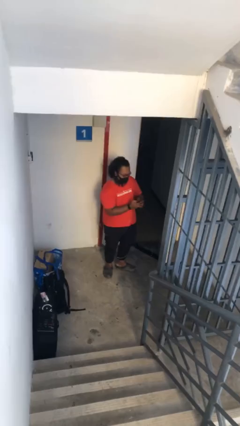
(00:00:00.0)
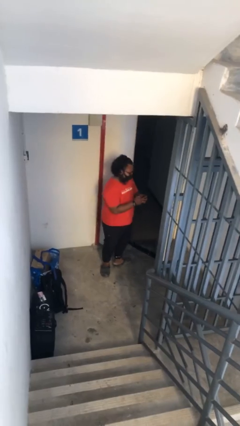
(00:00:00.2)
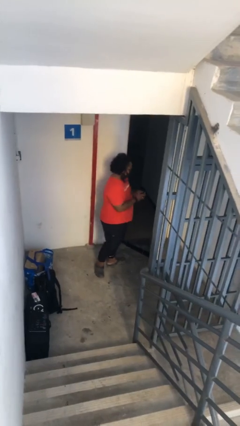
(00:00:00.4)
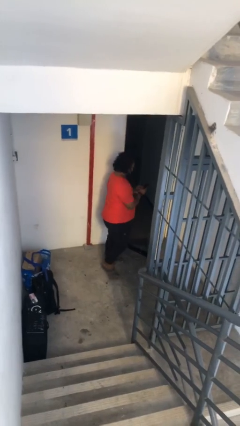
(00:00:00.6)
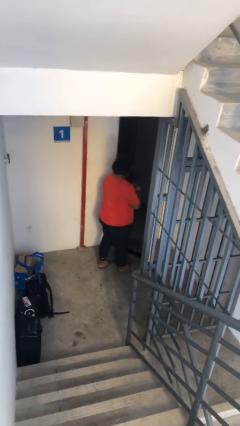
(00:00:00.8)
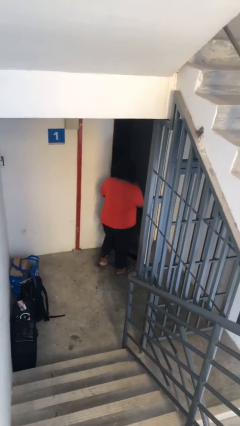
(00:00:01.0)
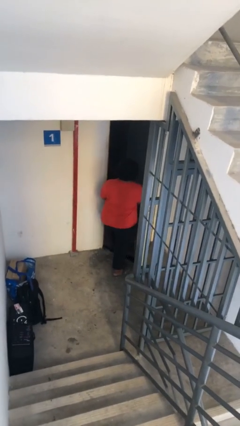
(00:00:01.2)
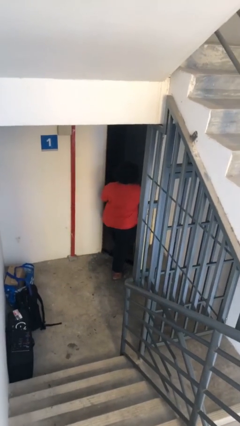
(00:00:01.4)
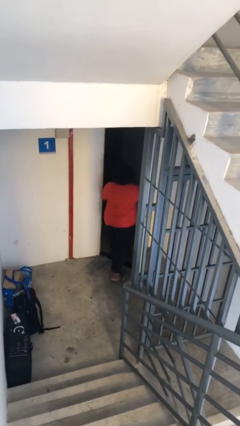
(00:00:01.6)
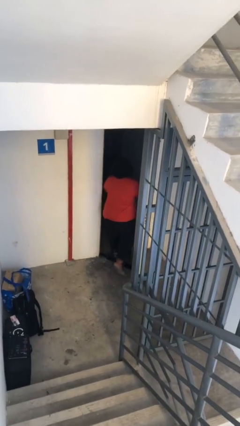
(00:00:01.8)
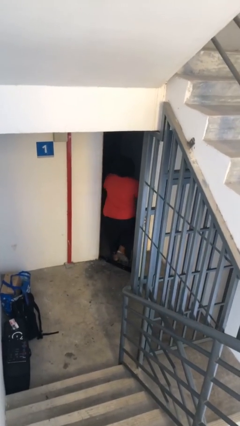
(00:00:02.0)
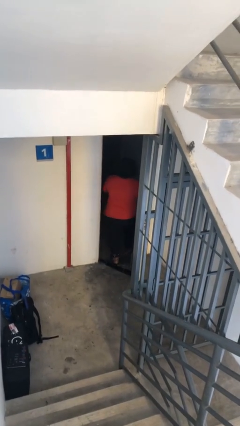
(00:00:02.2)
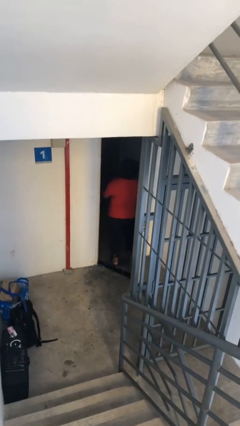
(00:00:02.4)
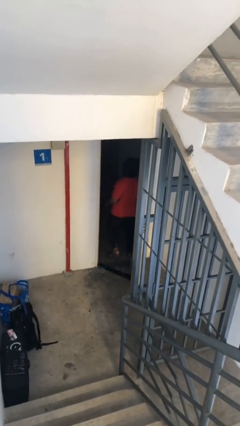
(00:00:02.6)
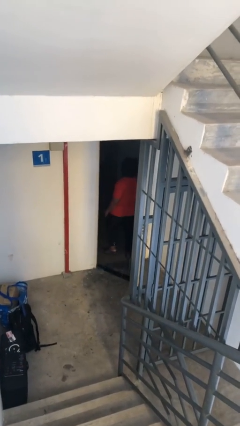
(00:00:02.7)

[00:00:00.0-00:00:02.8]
person exits scene through structure

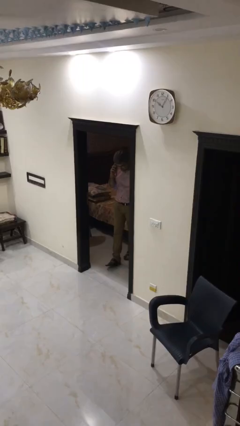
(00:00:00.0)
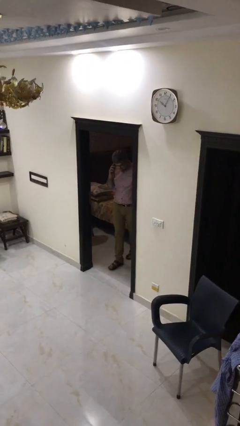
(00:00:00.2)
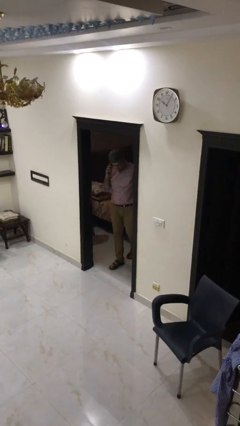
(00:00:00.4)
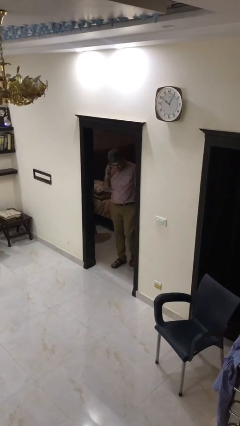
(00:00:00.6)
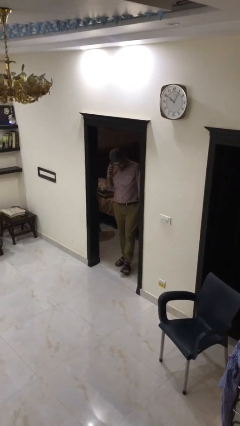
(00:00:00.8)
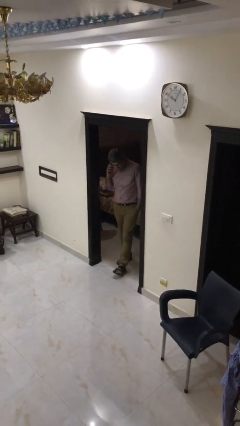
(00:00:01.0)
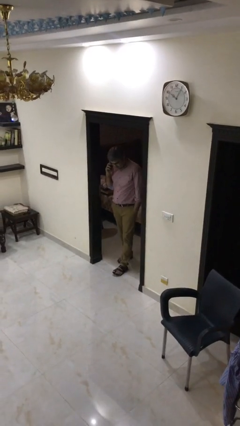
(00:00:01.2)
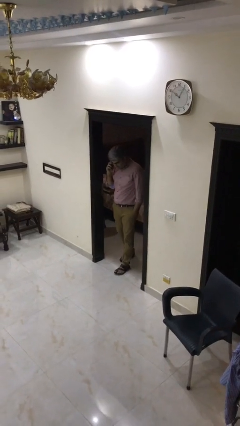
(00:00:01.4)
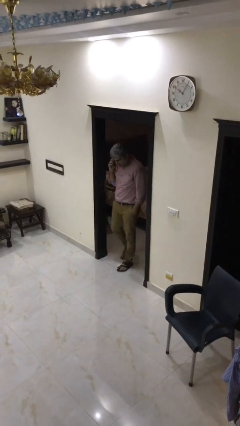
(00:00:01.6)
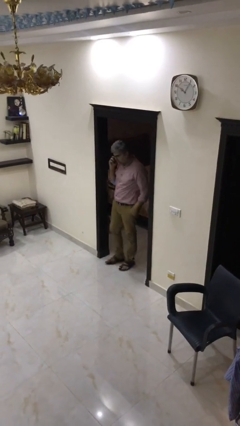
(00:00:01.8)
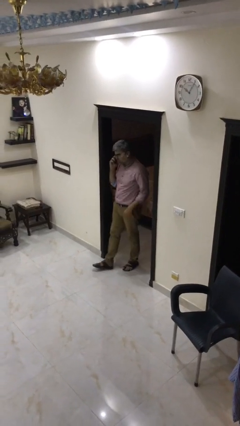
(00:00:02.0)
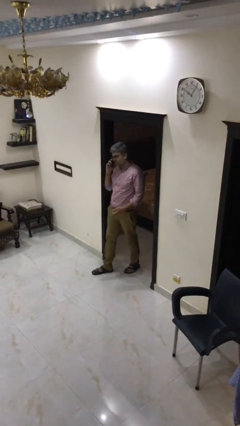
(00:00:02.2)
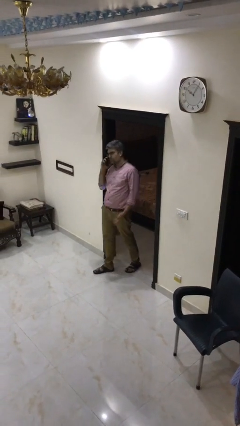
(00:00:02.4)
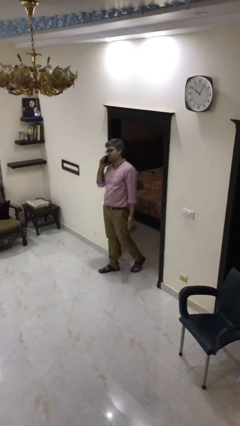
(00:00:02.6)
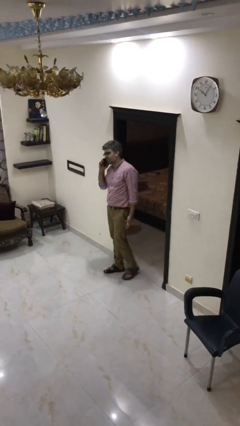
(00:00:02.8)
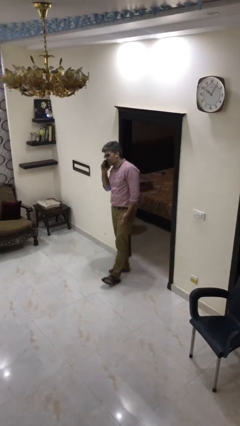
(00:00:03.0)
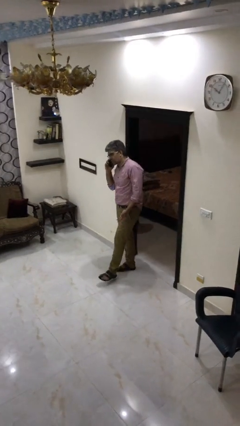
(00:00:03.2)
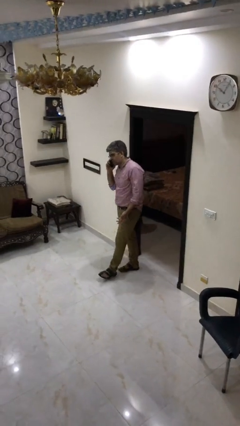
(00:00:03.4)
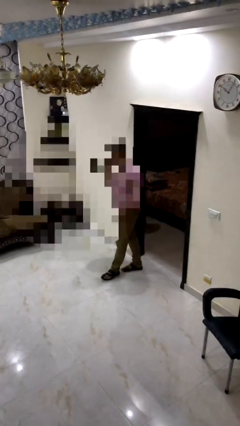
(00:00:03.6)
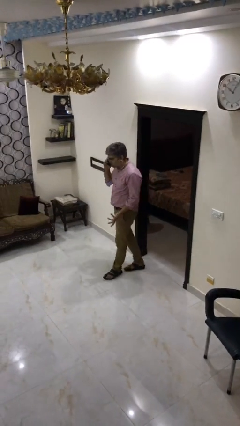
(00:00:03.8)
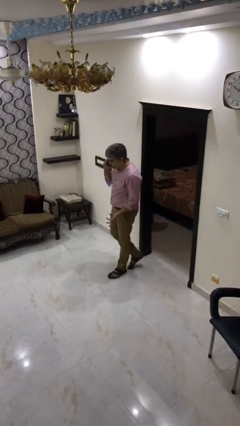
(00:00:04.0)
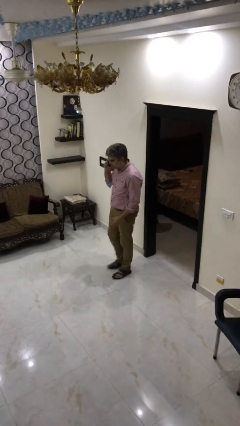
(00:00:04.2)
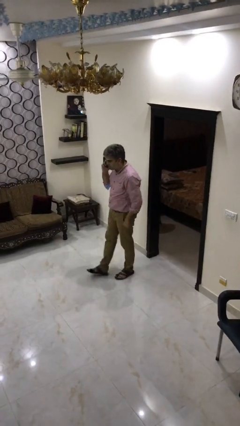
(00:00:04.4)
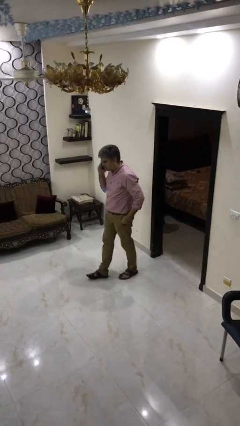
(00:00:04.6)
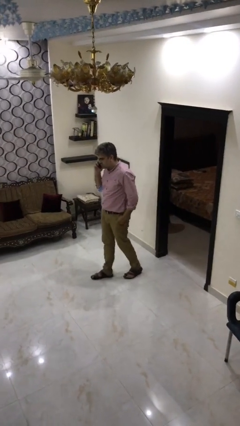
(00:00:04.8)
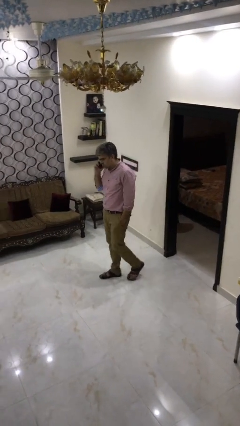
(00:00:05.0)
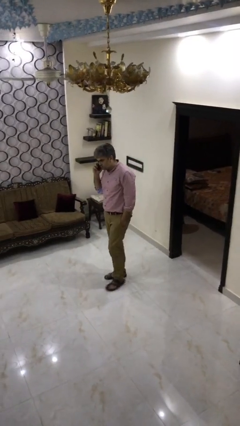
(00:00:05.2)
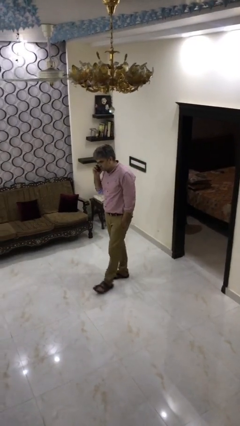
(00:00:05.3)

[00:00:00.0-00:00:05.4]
person enters scene through structure

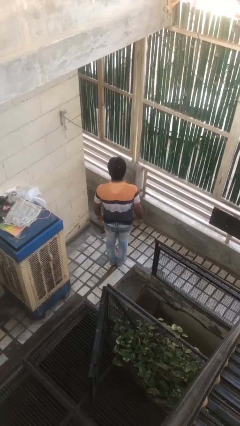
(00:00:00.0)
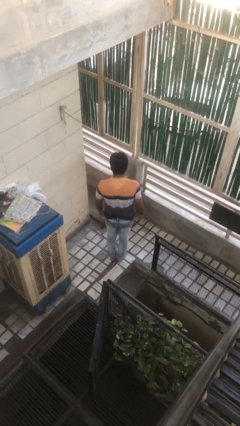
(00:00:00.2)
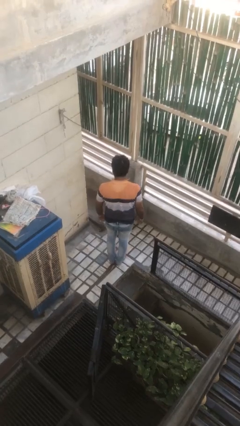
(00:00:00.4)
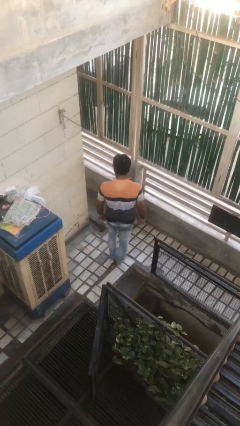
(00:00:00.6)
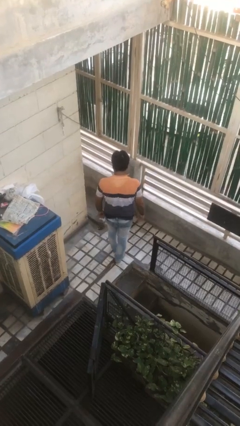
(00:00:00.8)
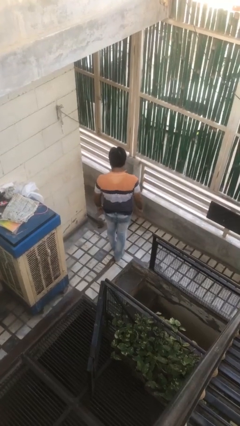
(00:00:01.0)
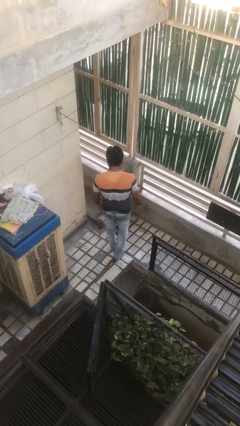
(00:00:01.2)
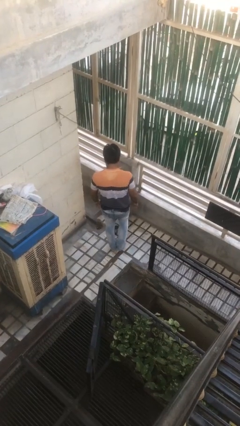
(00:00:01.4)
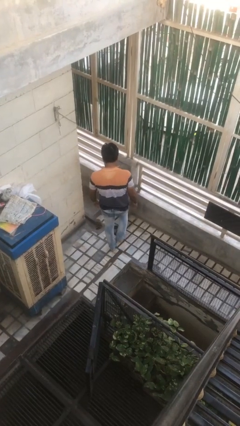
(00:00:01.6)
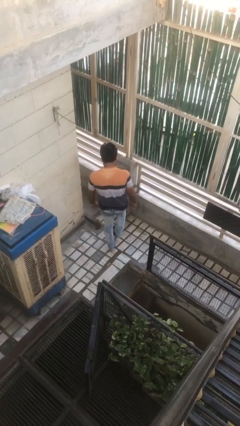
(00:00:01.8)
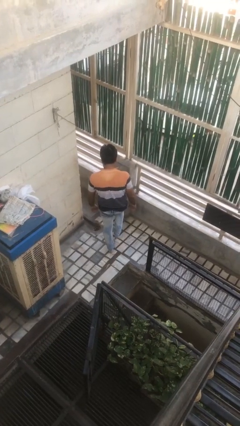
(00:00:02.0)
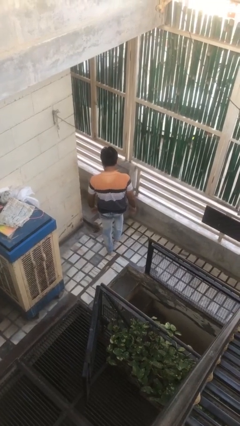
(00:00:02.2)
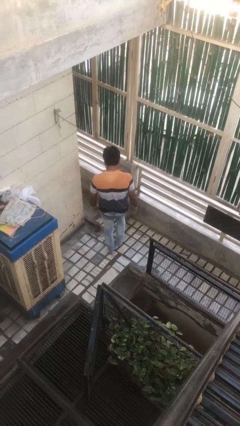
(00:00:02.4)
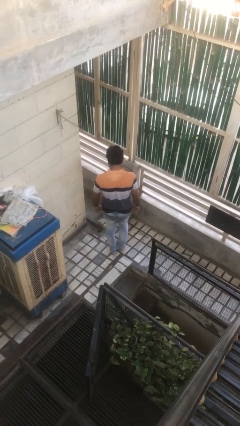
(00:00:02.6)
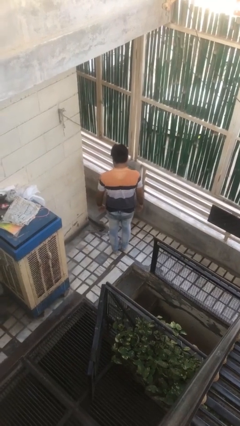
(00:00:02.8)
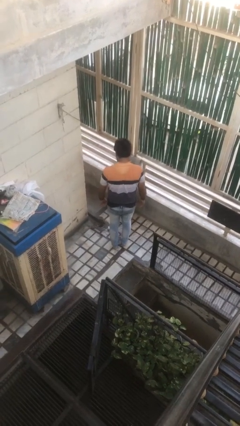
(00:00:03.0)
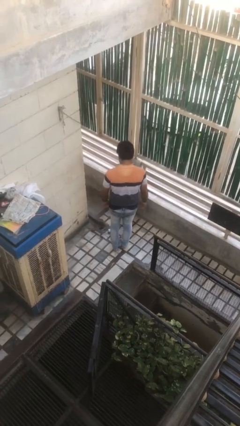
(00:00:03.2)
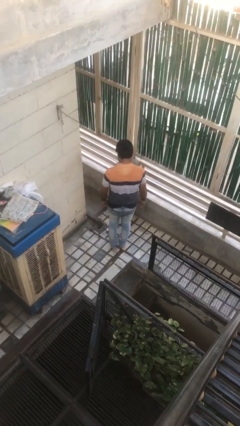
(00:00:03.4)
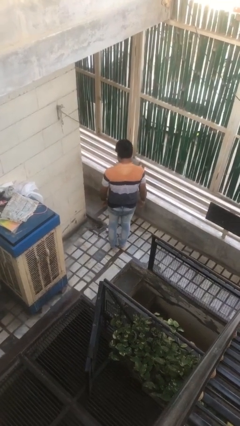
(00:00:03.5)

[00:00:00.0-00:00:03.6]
person spills on floor

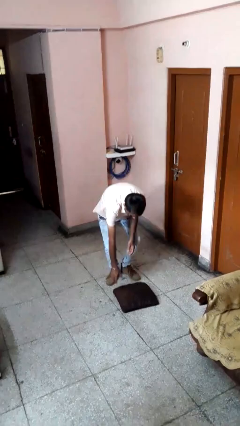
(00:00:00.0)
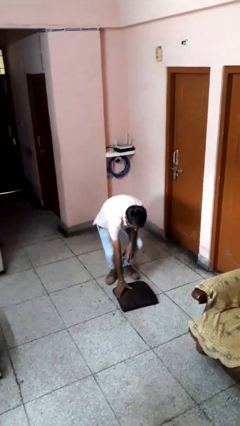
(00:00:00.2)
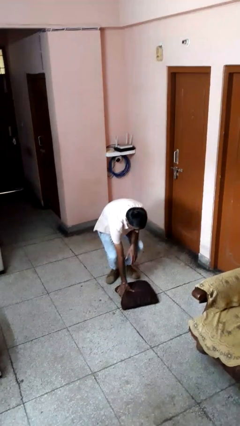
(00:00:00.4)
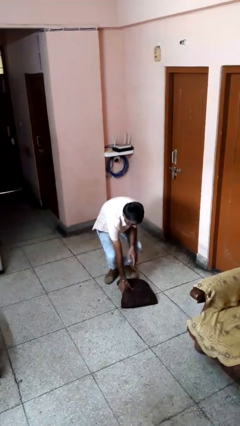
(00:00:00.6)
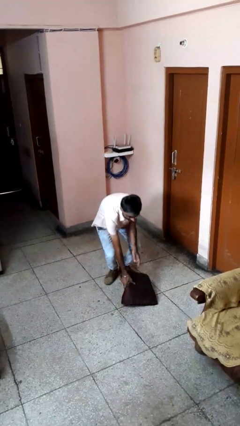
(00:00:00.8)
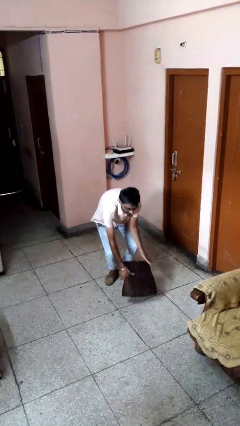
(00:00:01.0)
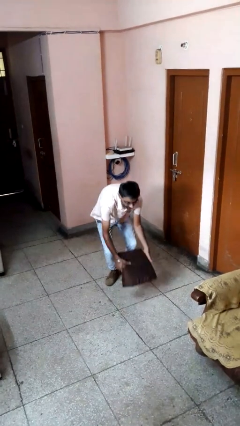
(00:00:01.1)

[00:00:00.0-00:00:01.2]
person picks up object from floor

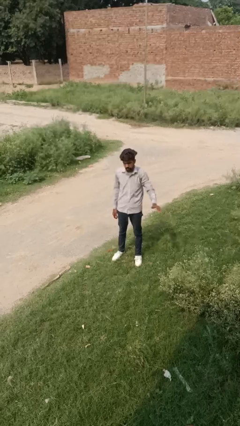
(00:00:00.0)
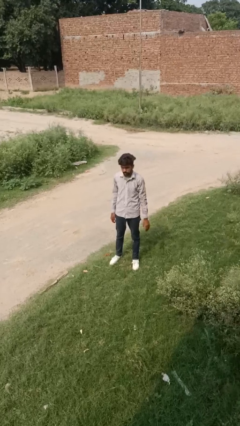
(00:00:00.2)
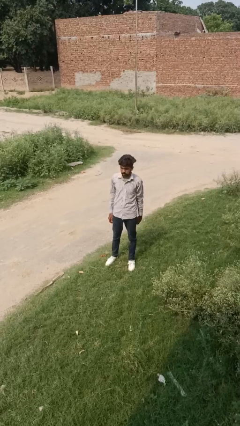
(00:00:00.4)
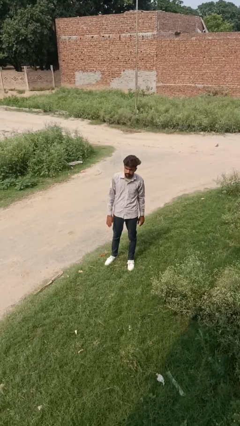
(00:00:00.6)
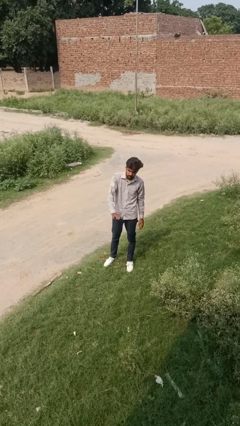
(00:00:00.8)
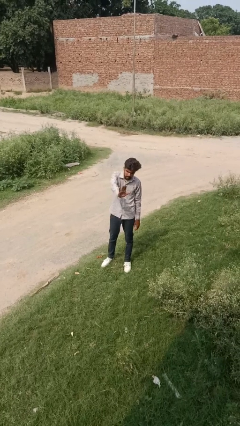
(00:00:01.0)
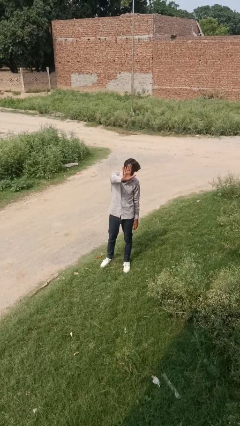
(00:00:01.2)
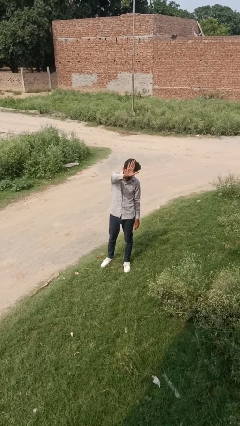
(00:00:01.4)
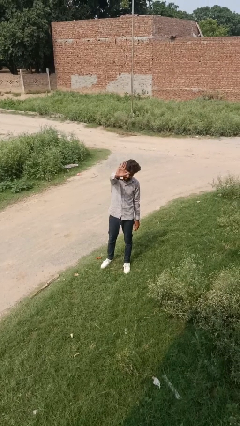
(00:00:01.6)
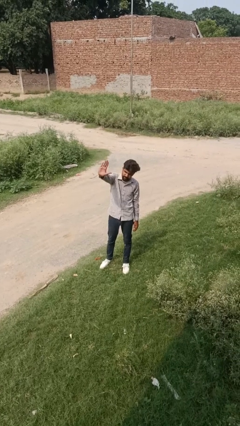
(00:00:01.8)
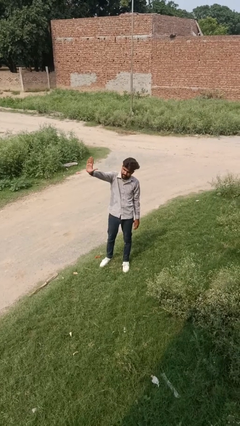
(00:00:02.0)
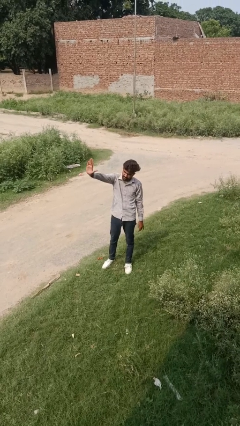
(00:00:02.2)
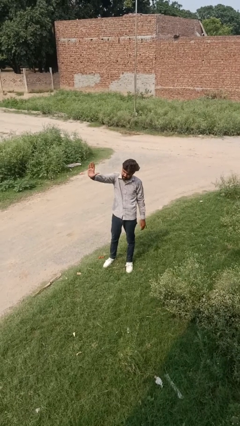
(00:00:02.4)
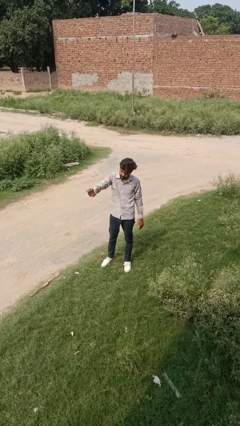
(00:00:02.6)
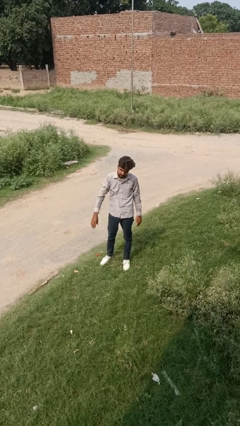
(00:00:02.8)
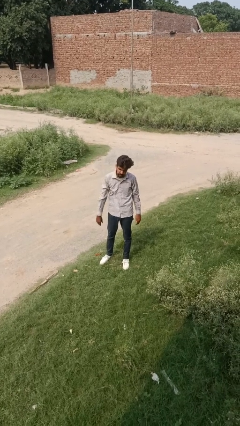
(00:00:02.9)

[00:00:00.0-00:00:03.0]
person gestures swipe right

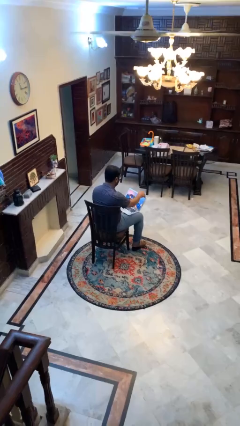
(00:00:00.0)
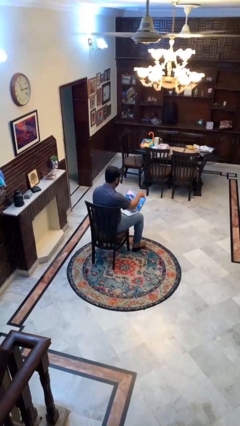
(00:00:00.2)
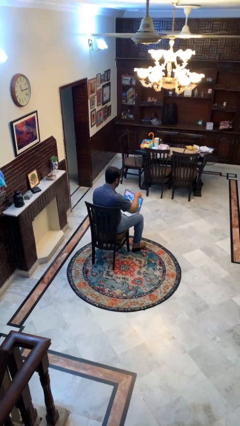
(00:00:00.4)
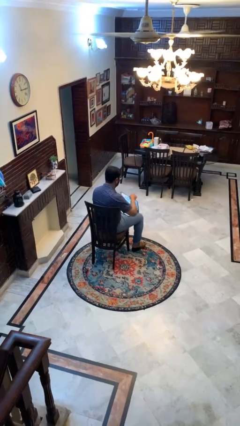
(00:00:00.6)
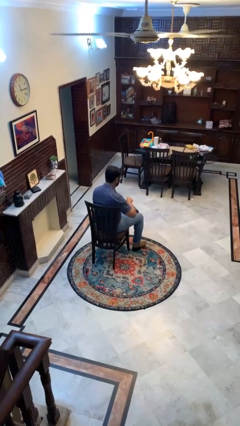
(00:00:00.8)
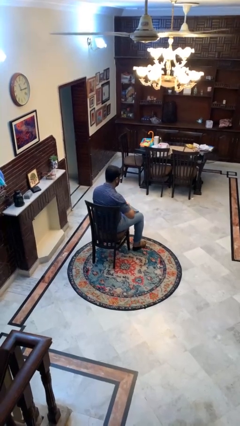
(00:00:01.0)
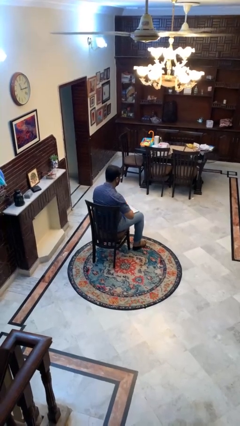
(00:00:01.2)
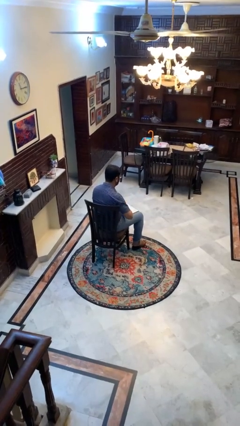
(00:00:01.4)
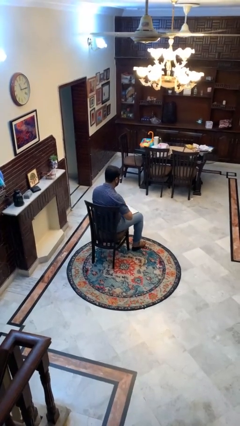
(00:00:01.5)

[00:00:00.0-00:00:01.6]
person closes laptop
